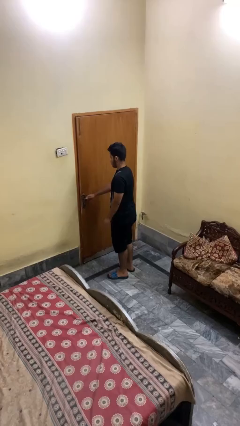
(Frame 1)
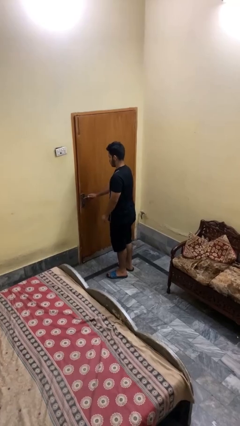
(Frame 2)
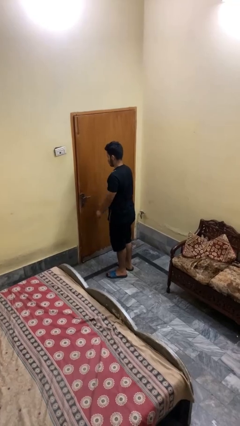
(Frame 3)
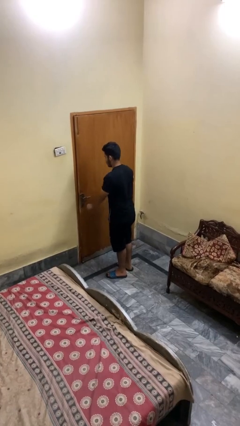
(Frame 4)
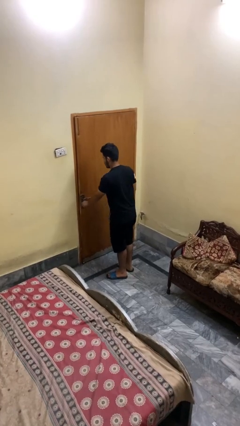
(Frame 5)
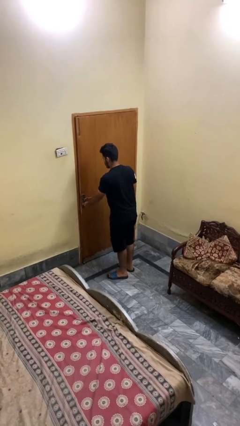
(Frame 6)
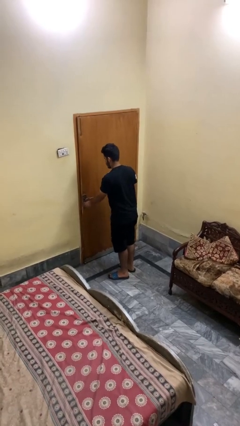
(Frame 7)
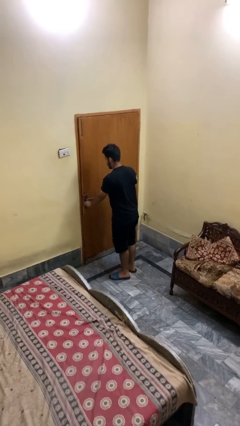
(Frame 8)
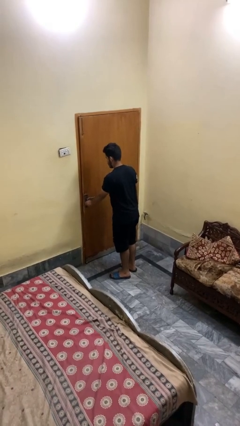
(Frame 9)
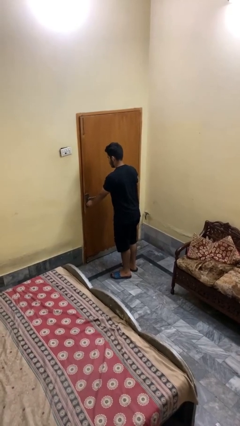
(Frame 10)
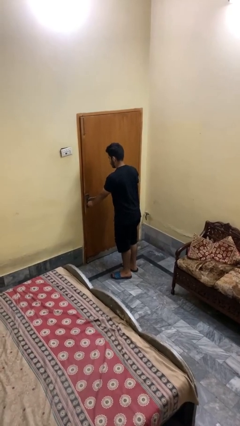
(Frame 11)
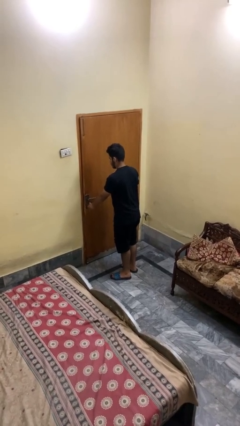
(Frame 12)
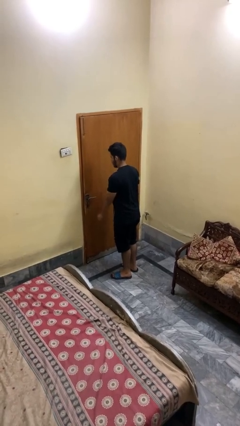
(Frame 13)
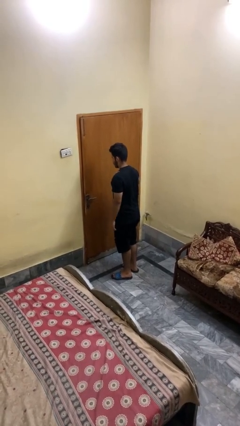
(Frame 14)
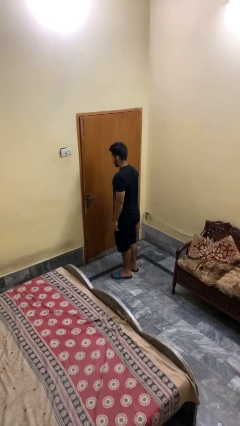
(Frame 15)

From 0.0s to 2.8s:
person locks door with keys

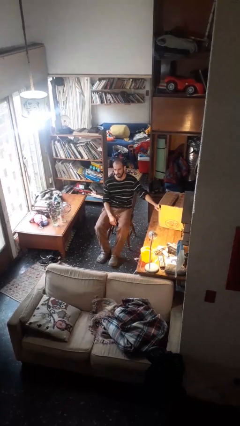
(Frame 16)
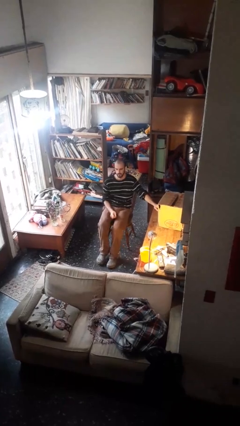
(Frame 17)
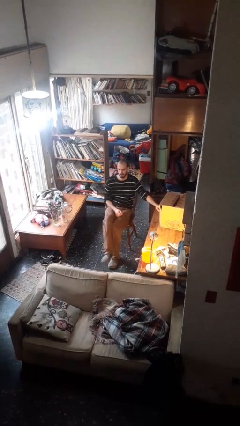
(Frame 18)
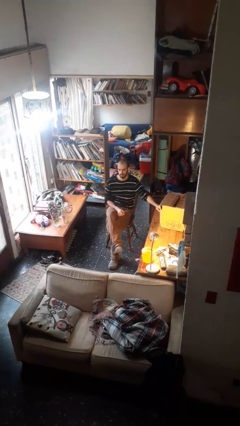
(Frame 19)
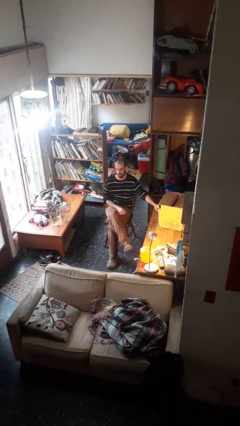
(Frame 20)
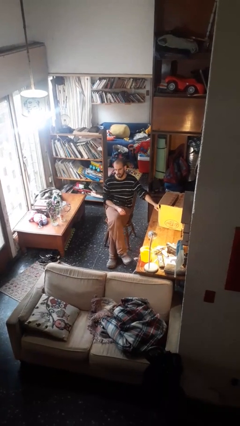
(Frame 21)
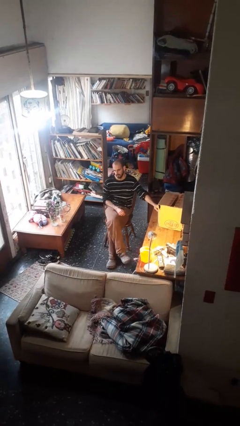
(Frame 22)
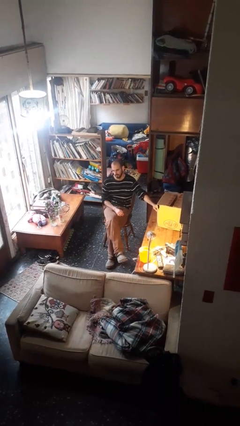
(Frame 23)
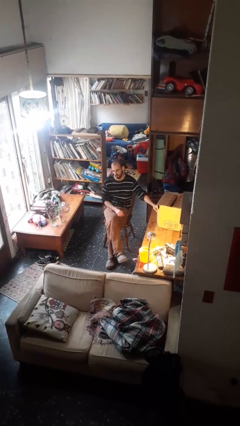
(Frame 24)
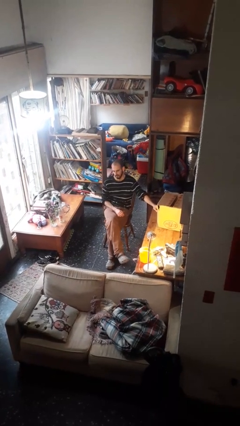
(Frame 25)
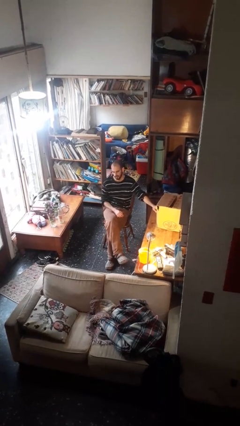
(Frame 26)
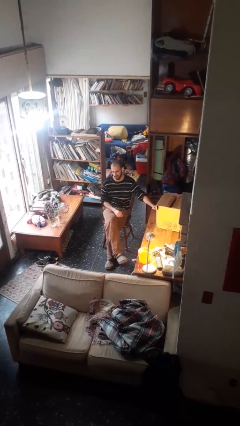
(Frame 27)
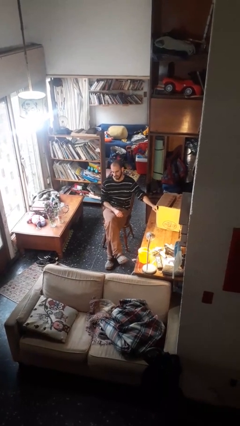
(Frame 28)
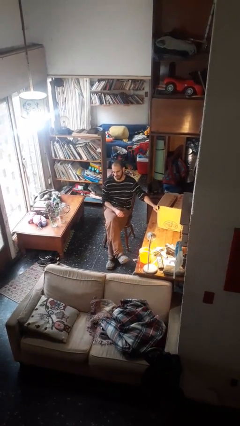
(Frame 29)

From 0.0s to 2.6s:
person crosses legs

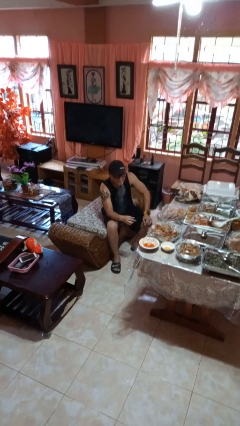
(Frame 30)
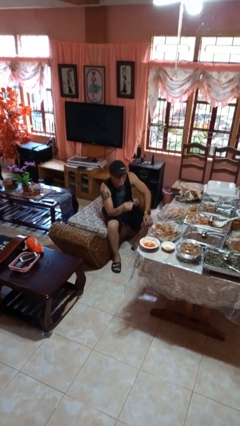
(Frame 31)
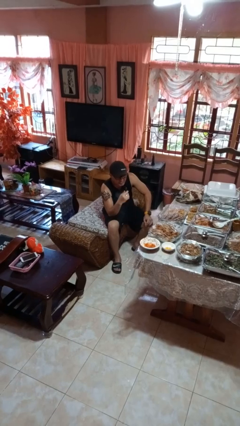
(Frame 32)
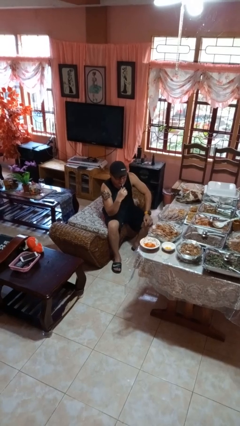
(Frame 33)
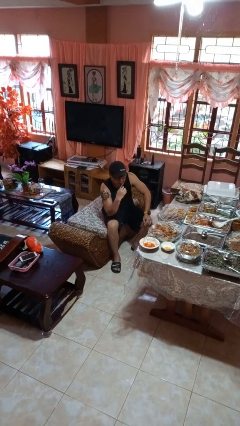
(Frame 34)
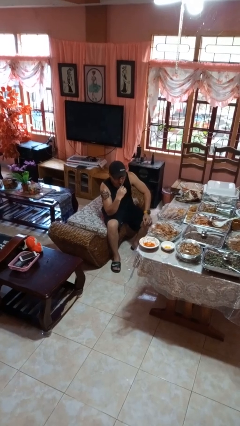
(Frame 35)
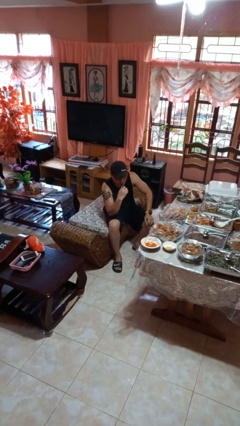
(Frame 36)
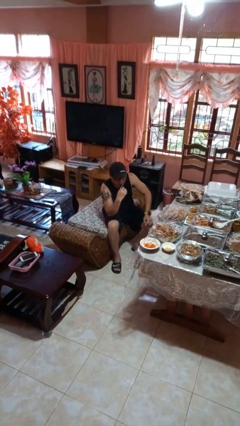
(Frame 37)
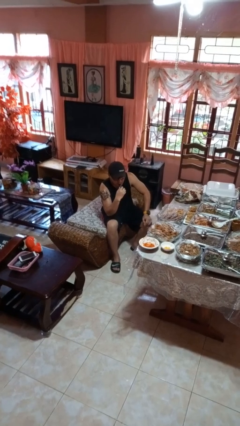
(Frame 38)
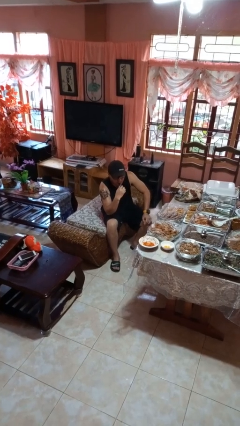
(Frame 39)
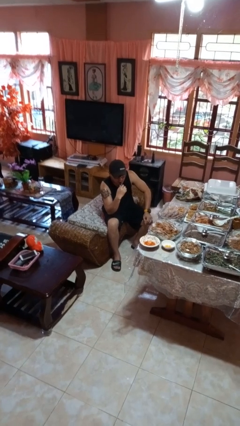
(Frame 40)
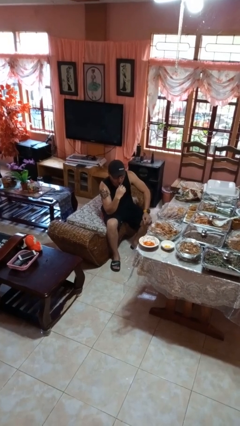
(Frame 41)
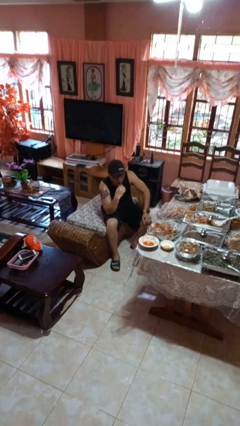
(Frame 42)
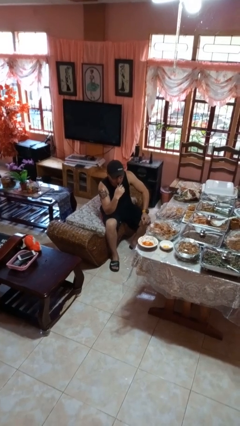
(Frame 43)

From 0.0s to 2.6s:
person vapes

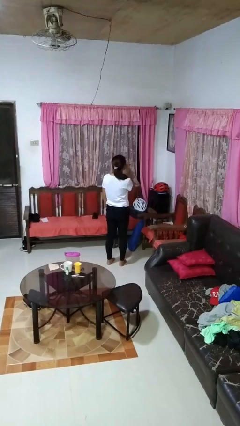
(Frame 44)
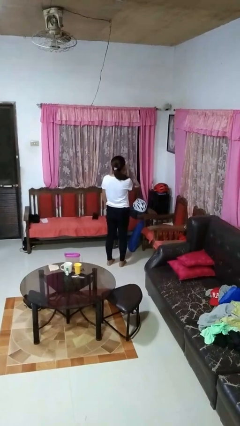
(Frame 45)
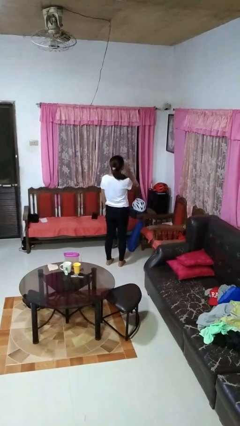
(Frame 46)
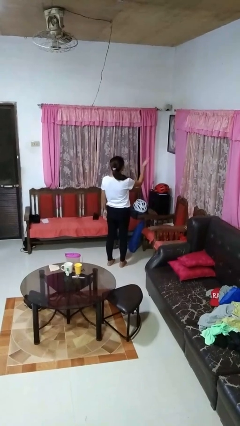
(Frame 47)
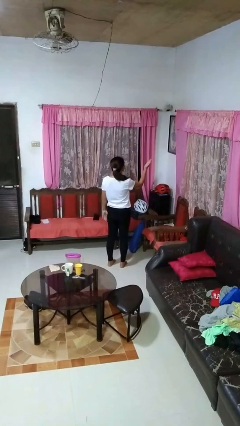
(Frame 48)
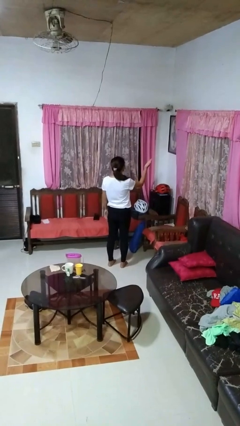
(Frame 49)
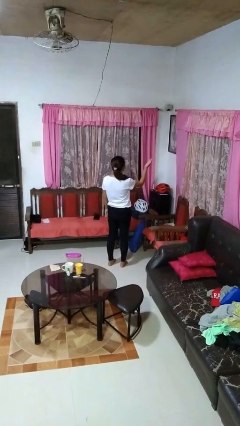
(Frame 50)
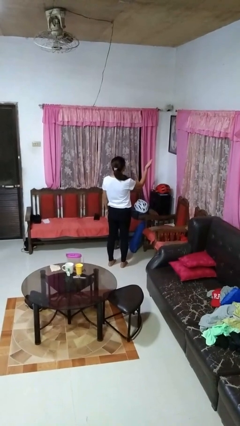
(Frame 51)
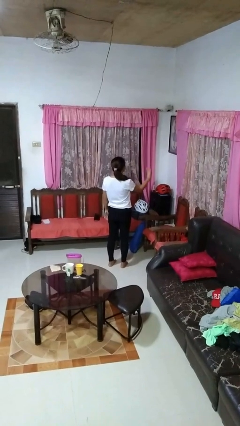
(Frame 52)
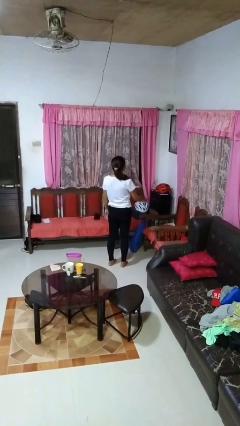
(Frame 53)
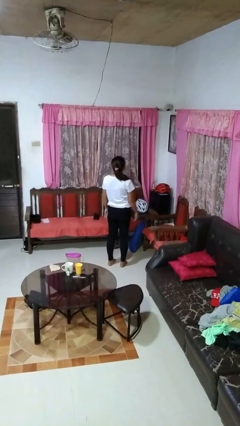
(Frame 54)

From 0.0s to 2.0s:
person gestures blow kiss

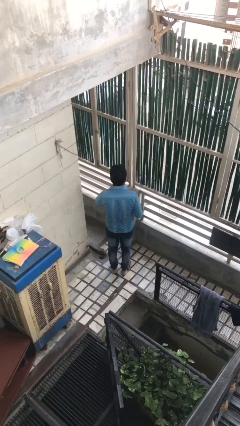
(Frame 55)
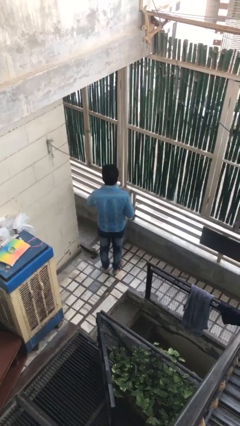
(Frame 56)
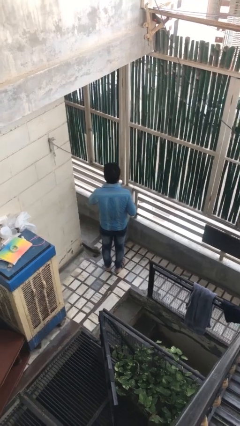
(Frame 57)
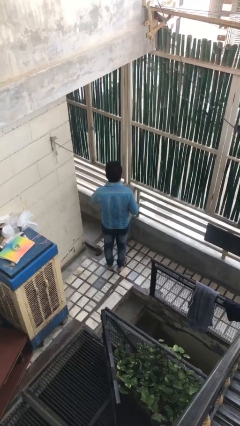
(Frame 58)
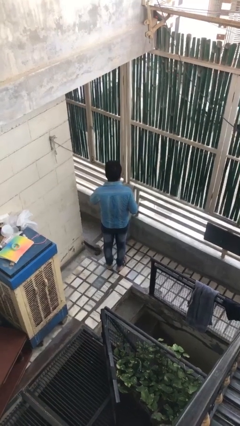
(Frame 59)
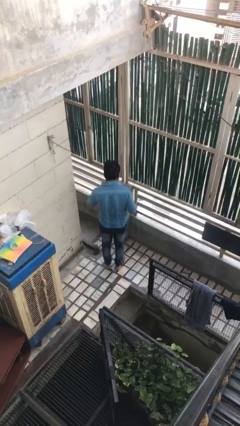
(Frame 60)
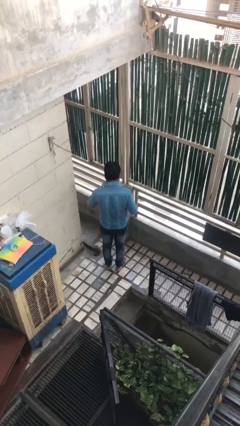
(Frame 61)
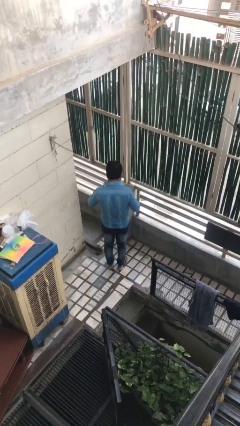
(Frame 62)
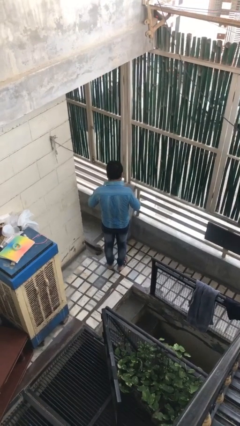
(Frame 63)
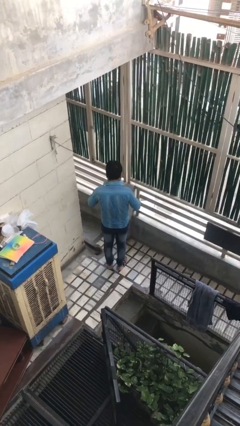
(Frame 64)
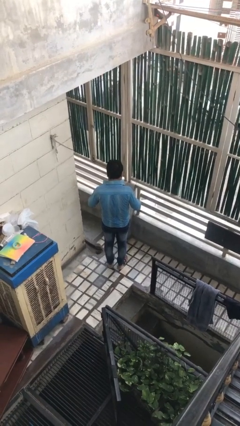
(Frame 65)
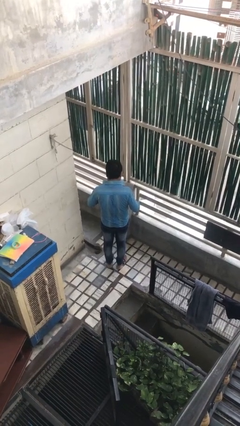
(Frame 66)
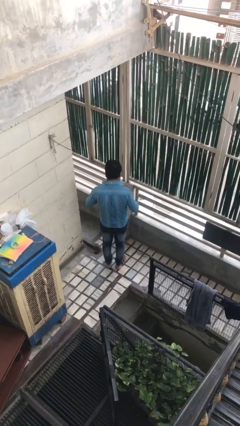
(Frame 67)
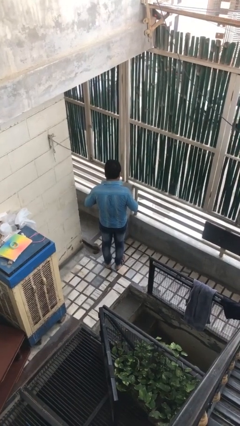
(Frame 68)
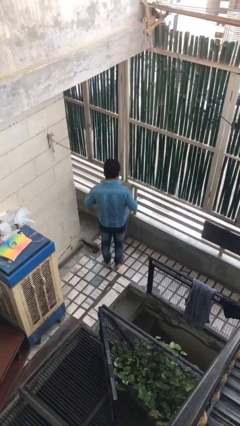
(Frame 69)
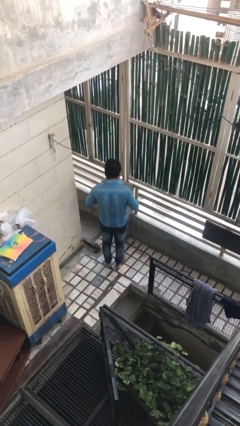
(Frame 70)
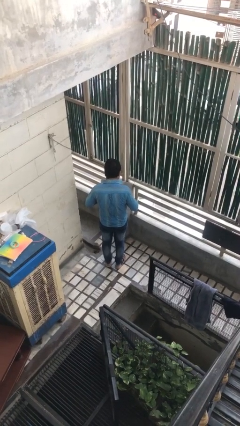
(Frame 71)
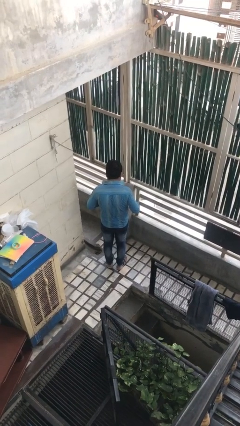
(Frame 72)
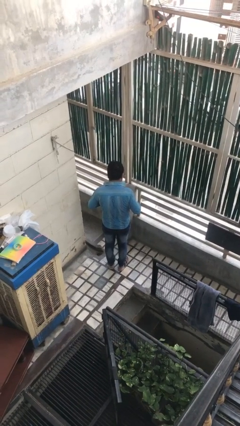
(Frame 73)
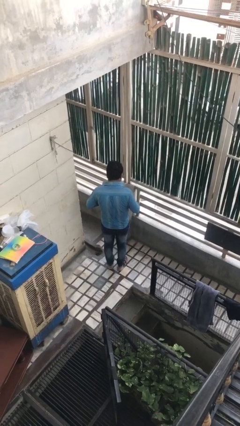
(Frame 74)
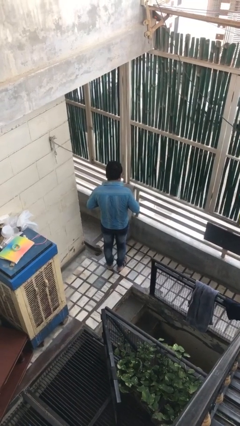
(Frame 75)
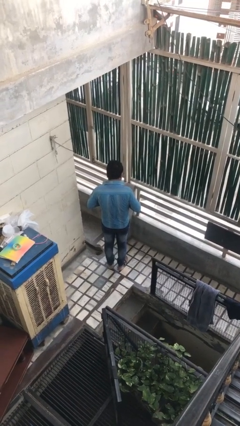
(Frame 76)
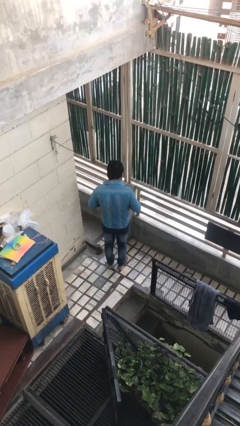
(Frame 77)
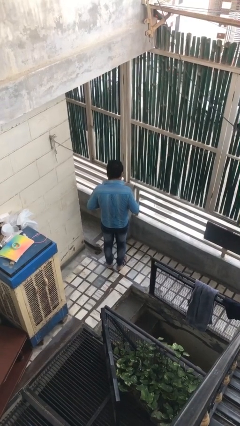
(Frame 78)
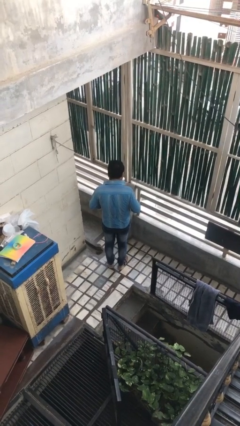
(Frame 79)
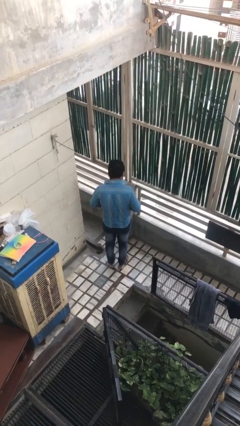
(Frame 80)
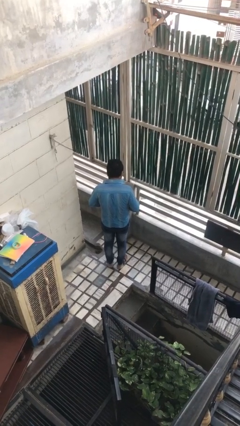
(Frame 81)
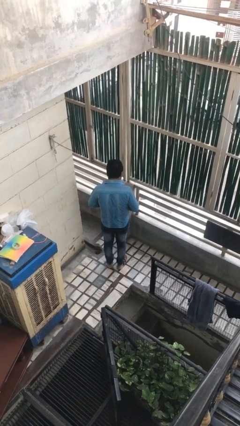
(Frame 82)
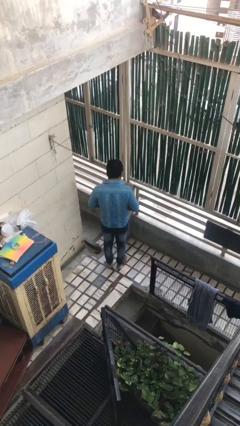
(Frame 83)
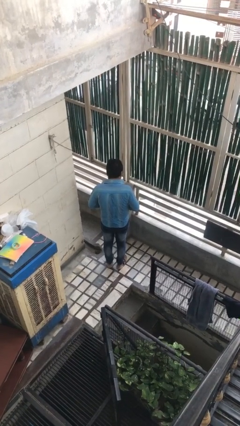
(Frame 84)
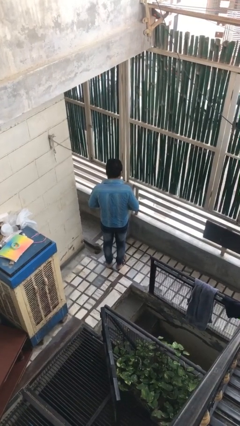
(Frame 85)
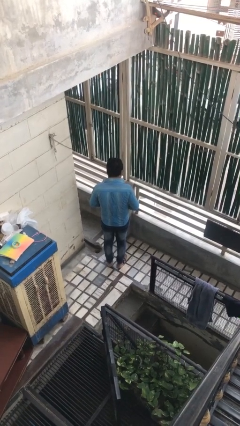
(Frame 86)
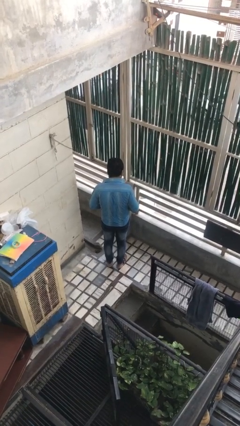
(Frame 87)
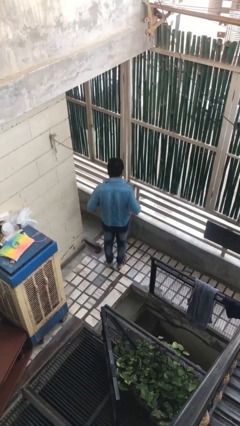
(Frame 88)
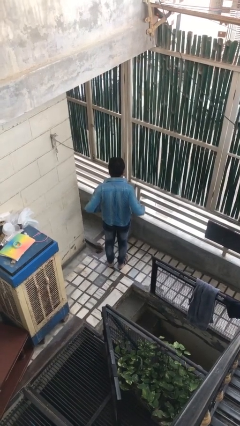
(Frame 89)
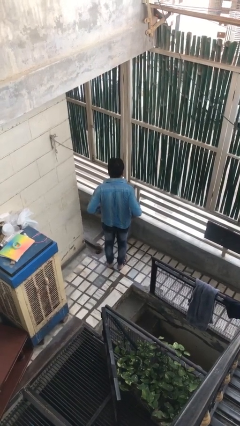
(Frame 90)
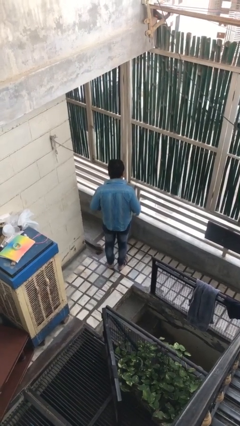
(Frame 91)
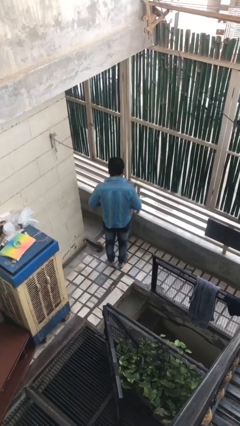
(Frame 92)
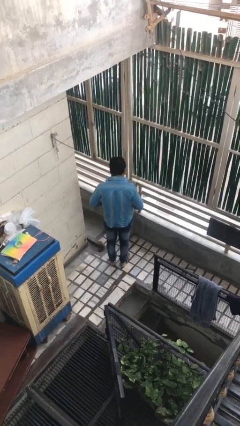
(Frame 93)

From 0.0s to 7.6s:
person unbuttons shirt
